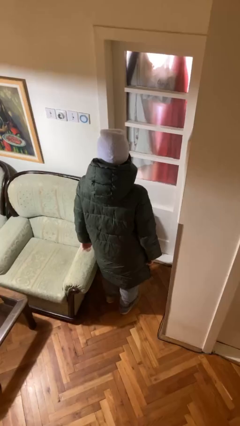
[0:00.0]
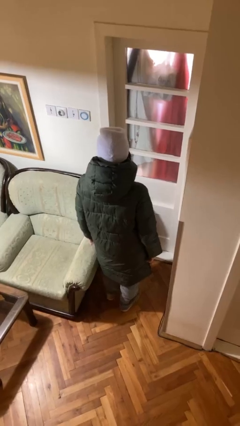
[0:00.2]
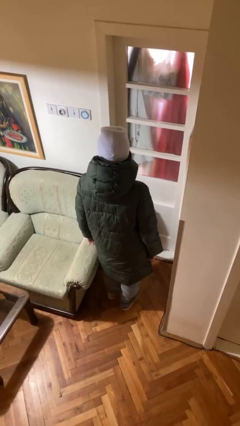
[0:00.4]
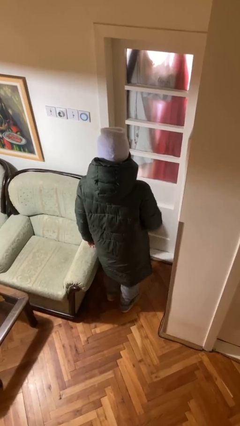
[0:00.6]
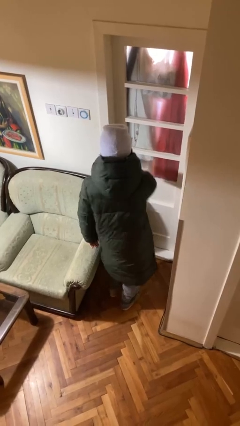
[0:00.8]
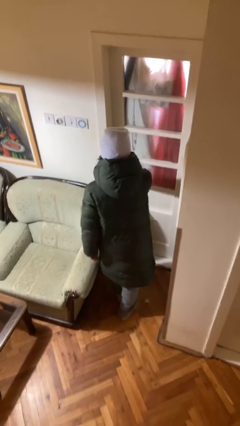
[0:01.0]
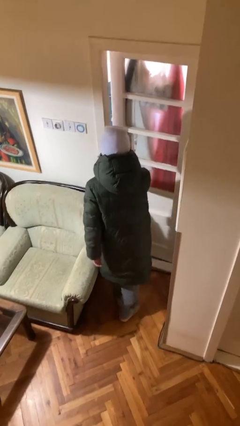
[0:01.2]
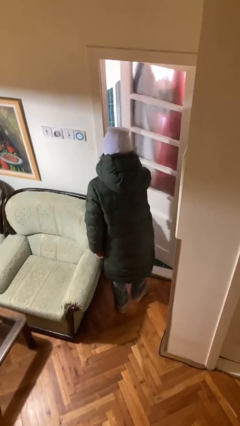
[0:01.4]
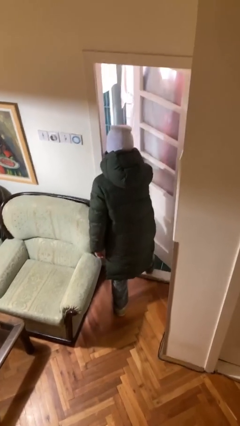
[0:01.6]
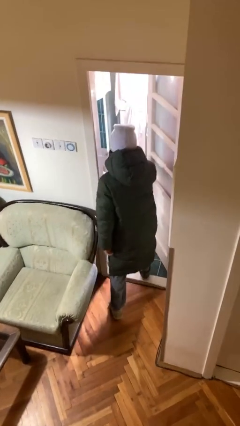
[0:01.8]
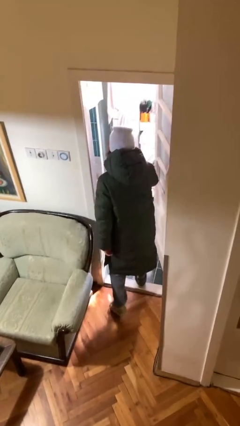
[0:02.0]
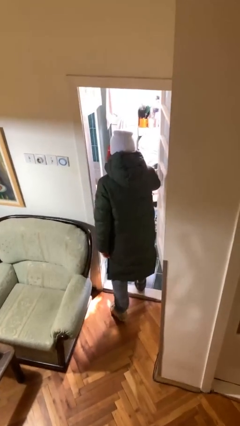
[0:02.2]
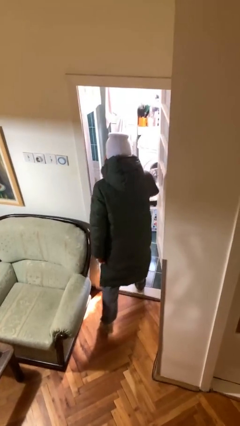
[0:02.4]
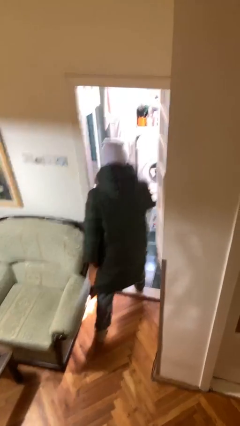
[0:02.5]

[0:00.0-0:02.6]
person opens facility door

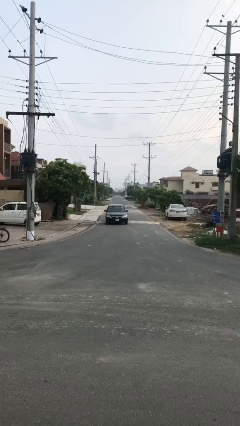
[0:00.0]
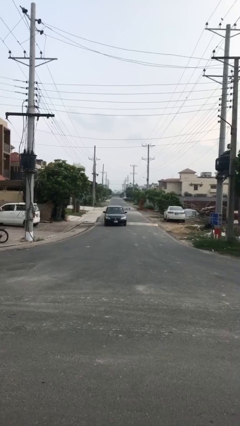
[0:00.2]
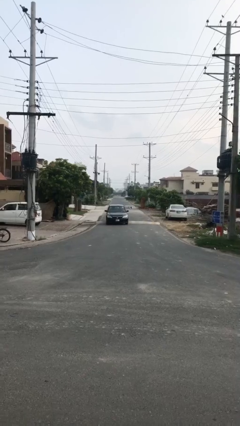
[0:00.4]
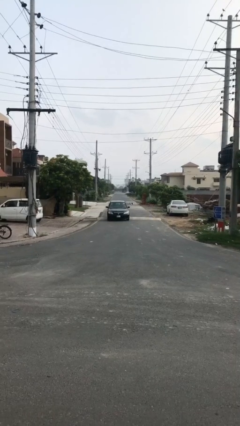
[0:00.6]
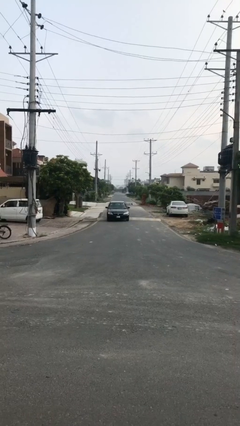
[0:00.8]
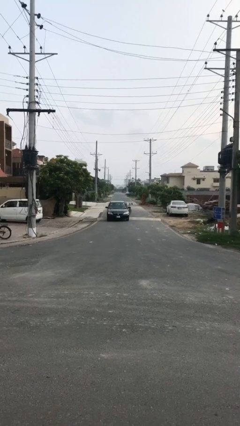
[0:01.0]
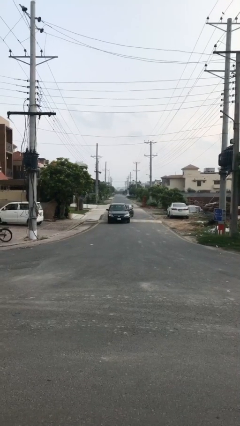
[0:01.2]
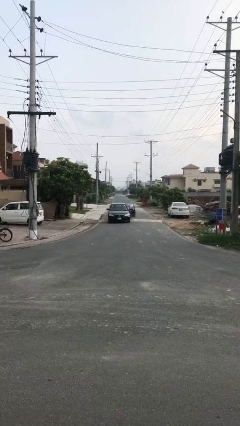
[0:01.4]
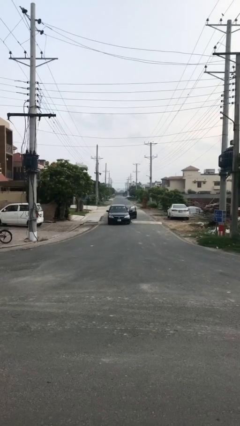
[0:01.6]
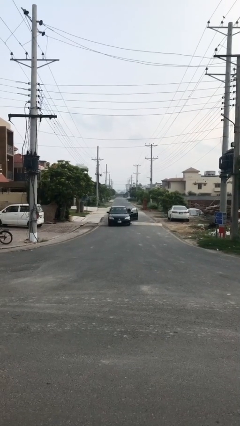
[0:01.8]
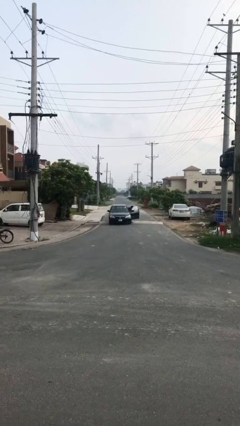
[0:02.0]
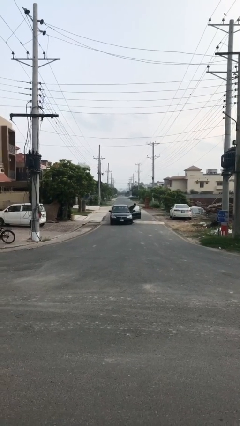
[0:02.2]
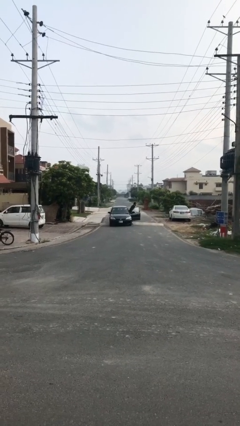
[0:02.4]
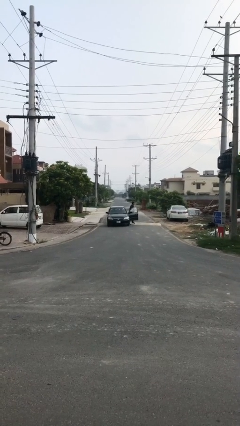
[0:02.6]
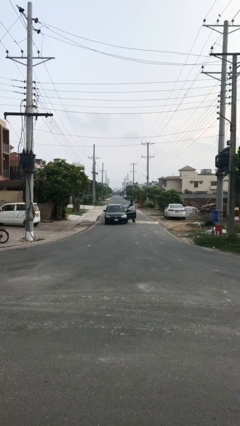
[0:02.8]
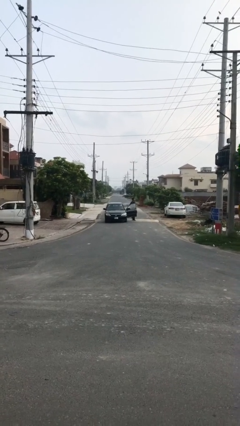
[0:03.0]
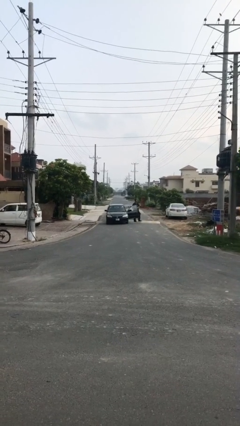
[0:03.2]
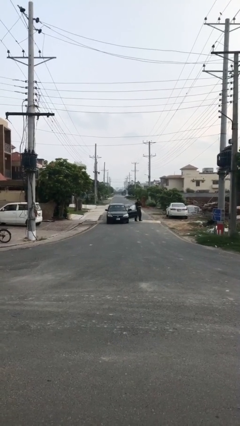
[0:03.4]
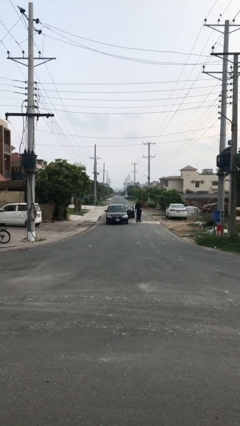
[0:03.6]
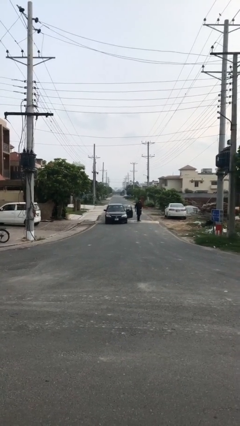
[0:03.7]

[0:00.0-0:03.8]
car drops off person

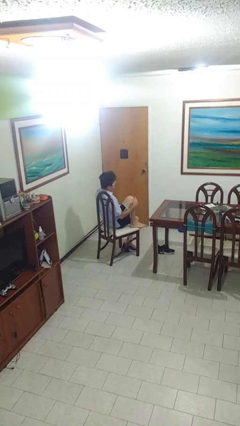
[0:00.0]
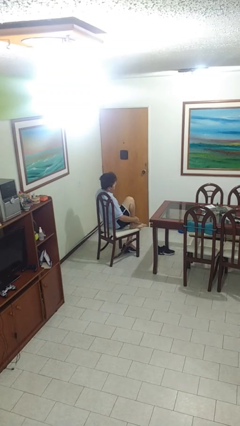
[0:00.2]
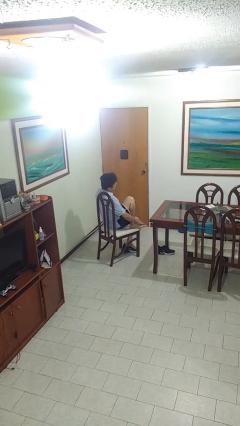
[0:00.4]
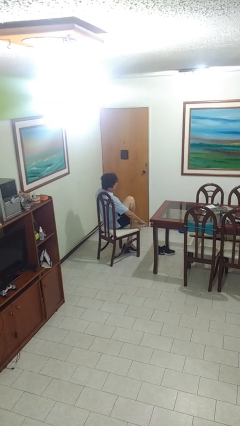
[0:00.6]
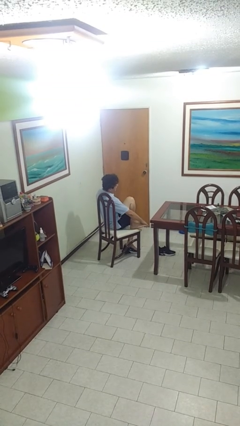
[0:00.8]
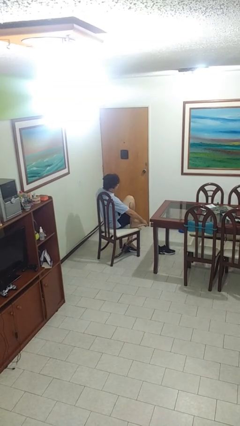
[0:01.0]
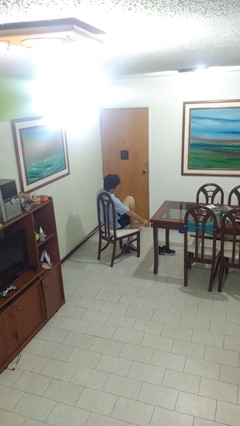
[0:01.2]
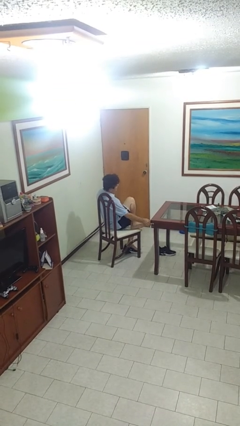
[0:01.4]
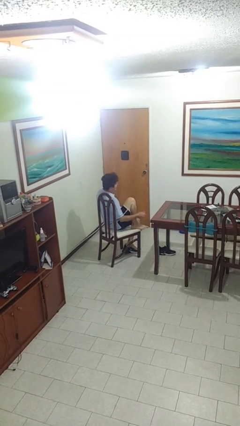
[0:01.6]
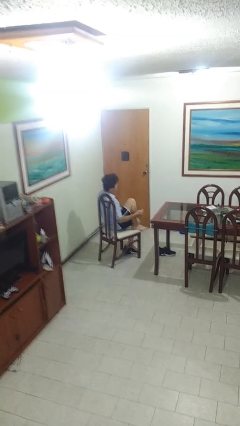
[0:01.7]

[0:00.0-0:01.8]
person rubs foot

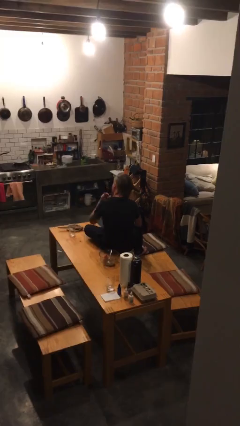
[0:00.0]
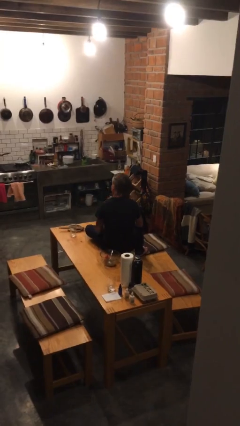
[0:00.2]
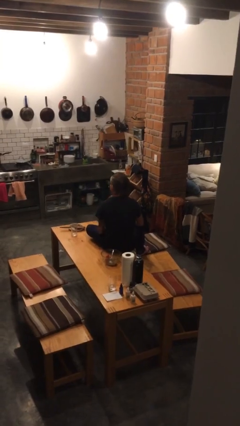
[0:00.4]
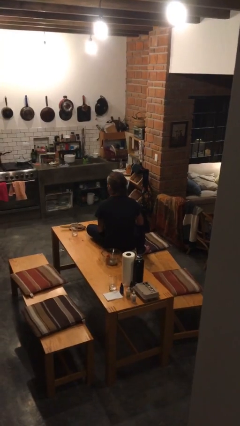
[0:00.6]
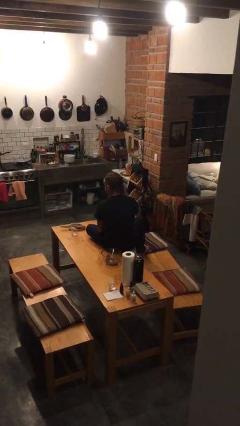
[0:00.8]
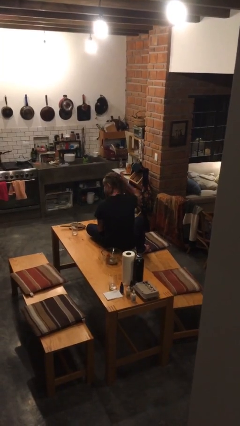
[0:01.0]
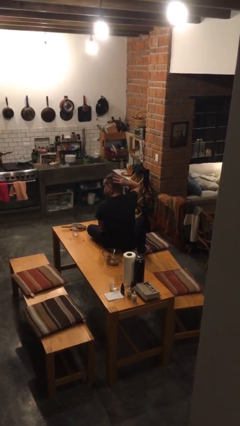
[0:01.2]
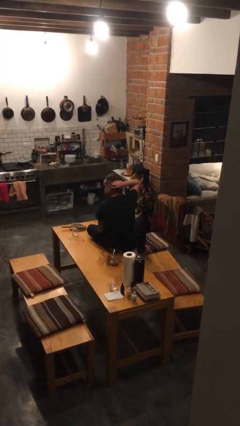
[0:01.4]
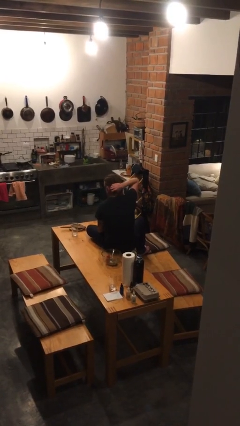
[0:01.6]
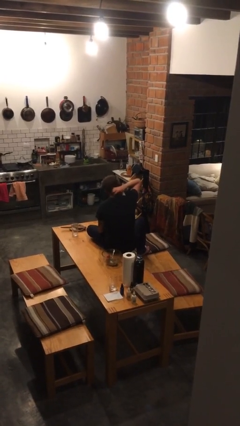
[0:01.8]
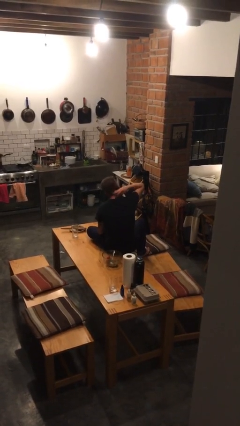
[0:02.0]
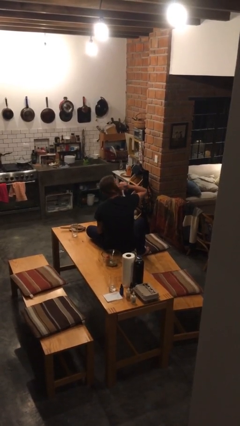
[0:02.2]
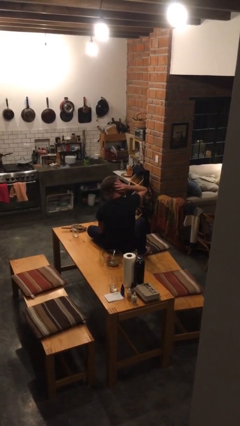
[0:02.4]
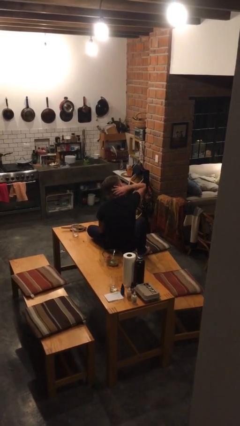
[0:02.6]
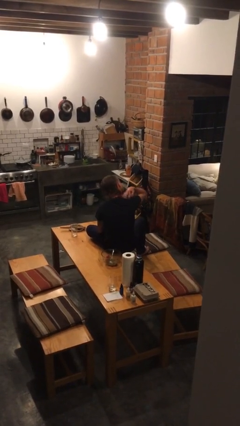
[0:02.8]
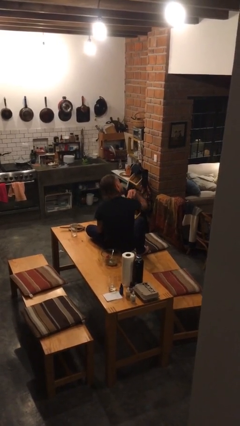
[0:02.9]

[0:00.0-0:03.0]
person strokes hair

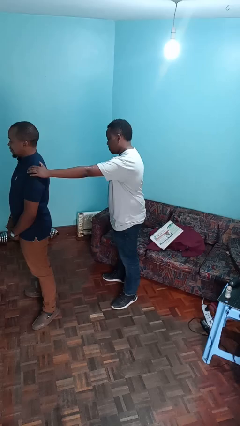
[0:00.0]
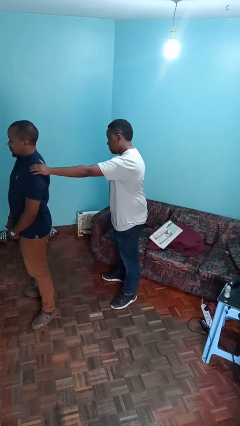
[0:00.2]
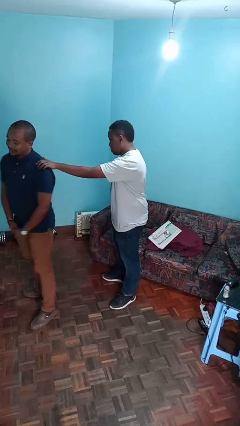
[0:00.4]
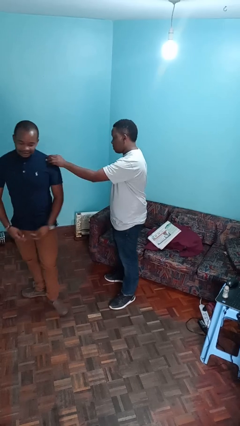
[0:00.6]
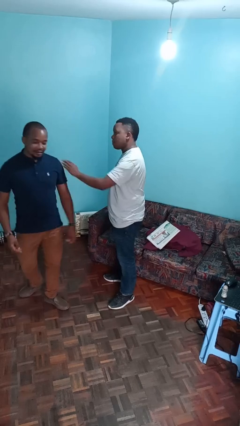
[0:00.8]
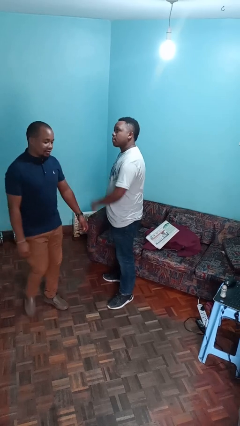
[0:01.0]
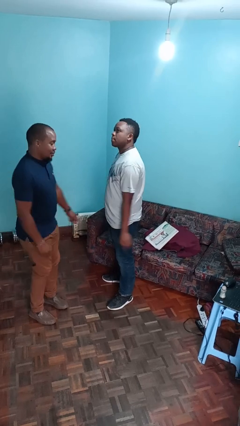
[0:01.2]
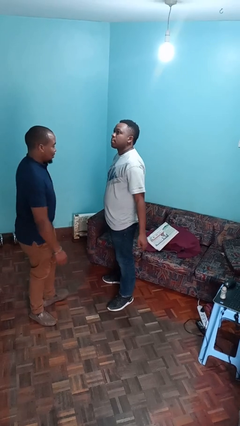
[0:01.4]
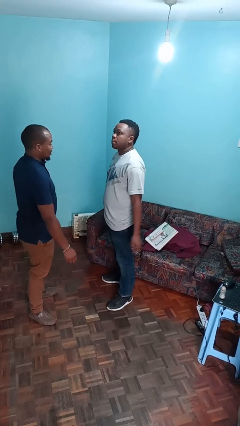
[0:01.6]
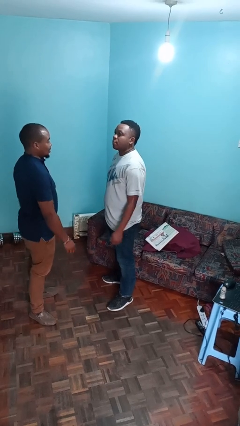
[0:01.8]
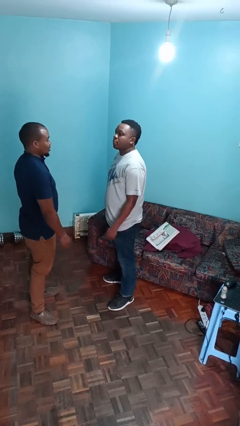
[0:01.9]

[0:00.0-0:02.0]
person spins person around

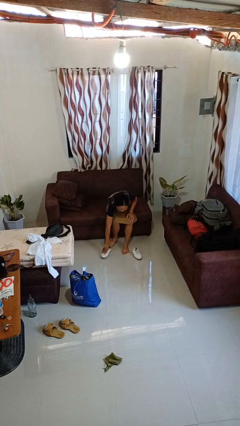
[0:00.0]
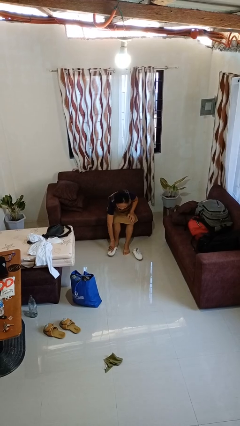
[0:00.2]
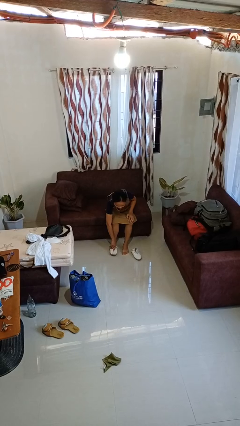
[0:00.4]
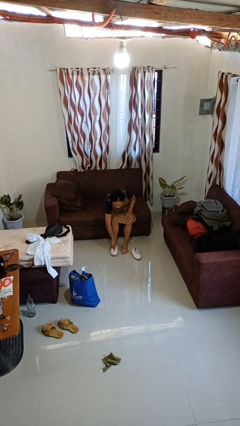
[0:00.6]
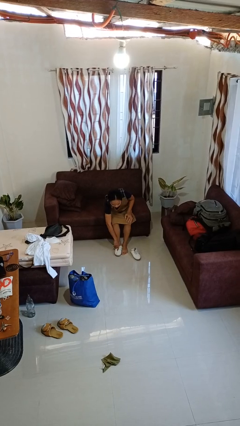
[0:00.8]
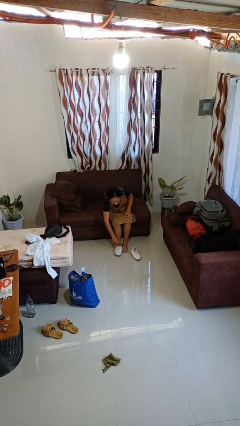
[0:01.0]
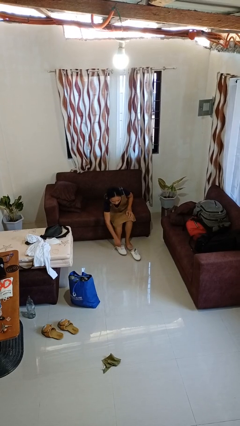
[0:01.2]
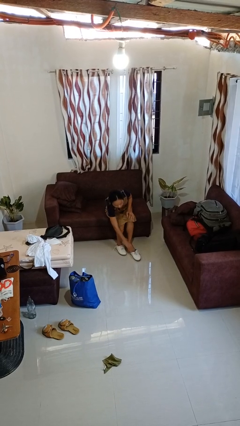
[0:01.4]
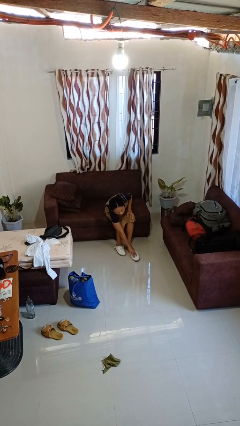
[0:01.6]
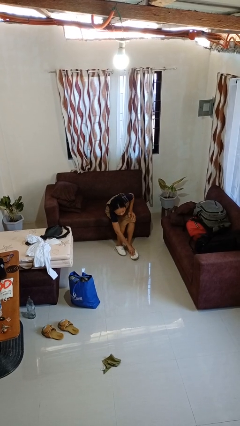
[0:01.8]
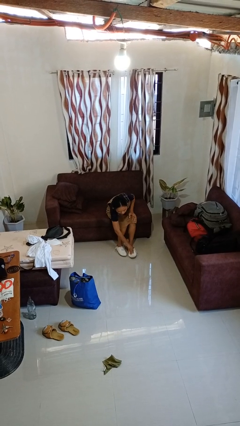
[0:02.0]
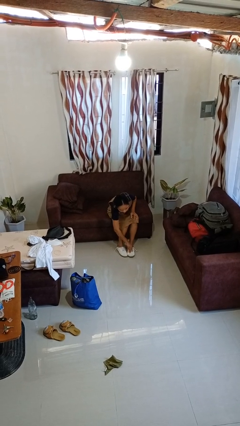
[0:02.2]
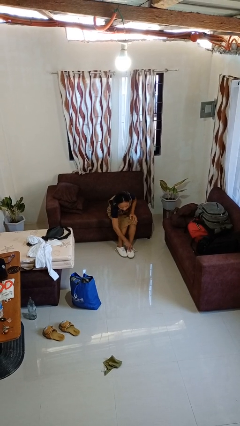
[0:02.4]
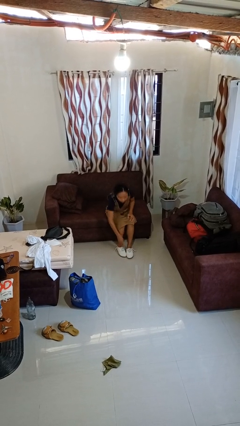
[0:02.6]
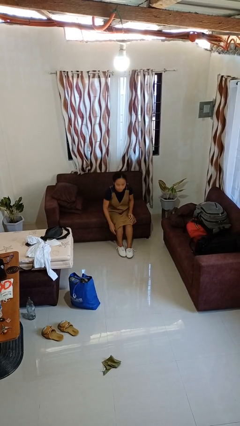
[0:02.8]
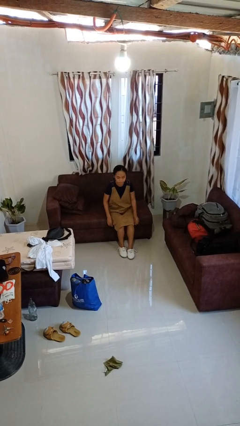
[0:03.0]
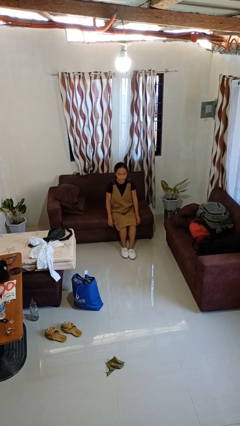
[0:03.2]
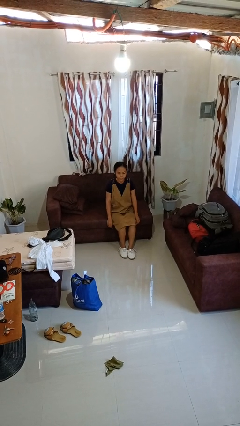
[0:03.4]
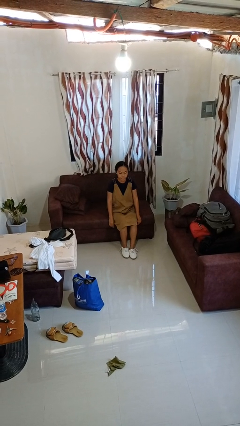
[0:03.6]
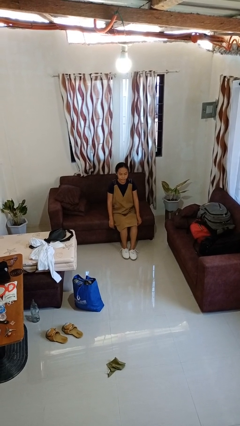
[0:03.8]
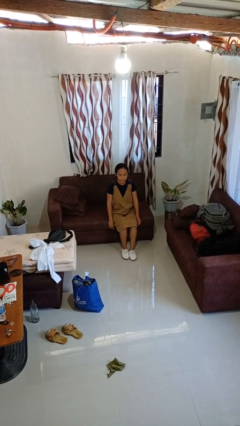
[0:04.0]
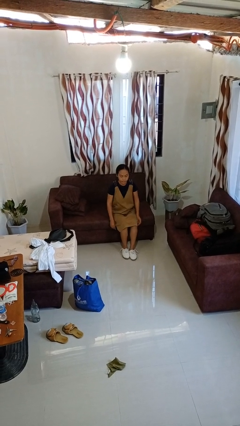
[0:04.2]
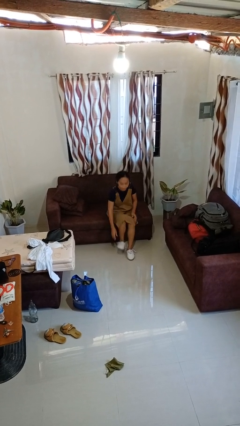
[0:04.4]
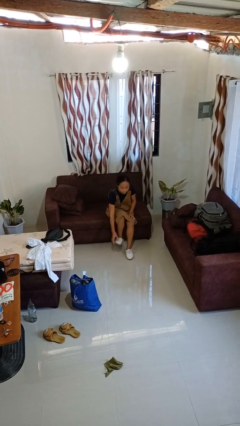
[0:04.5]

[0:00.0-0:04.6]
person puts on shoes
